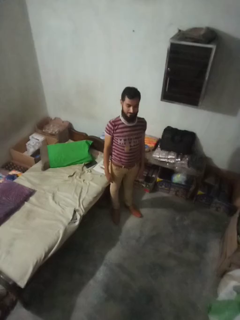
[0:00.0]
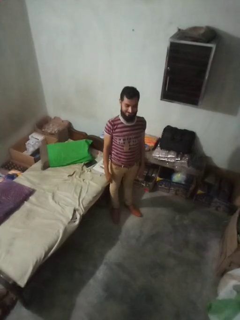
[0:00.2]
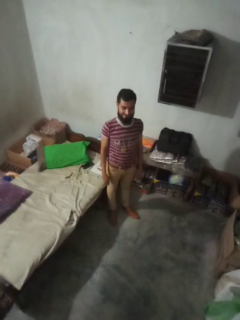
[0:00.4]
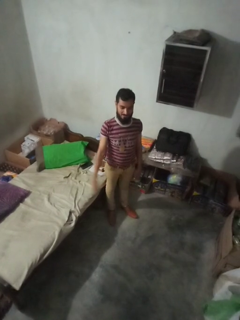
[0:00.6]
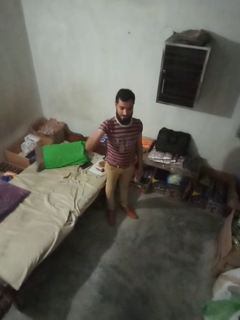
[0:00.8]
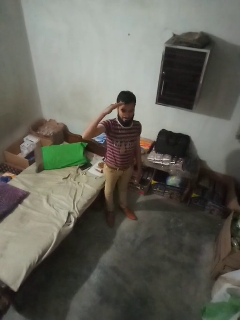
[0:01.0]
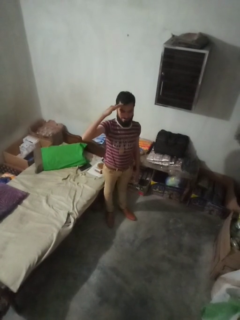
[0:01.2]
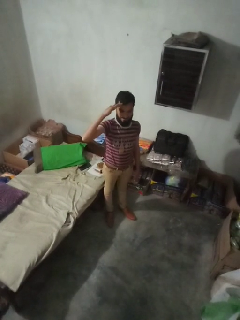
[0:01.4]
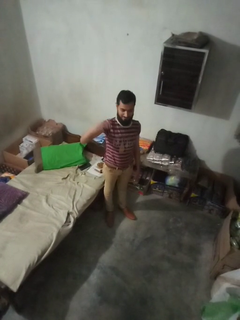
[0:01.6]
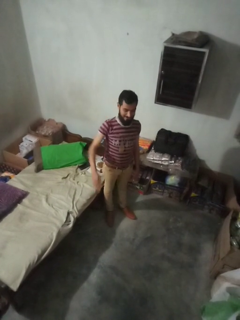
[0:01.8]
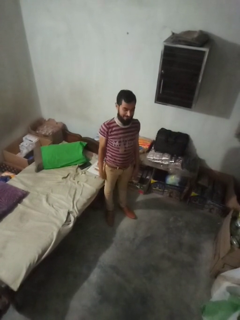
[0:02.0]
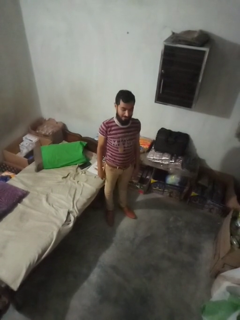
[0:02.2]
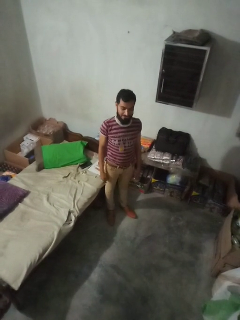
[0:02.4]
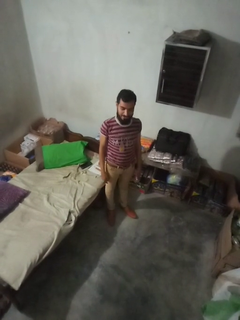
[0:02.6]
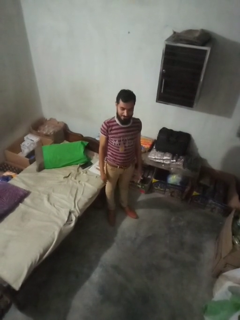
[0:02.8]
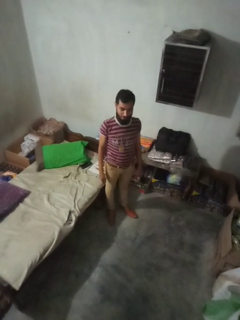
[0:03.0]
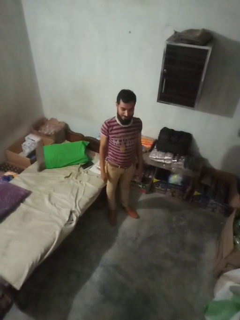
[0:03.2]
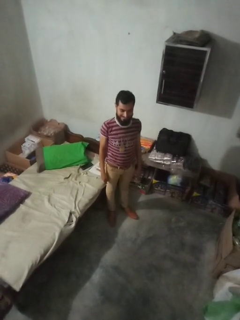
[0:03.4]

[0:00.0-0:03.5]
person salutes

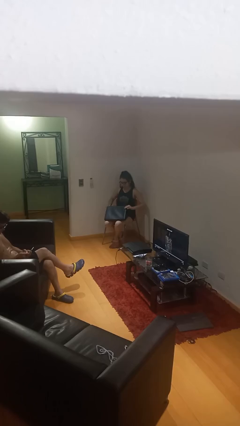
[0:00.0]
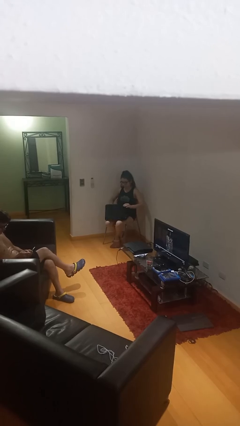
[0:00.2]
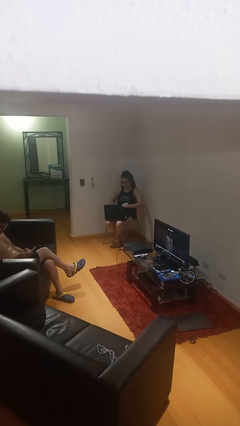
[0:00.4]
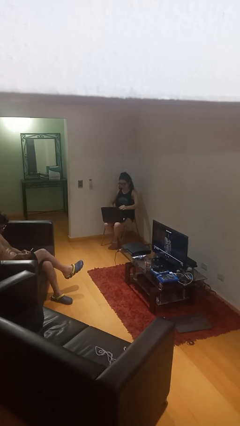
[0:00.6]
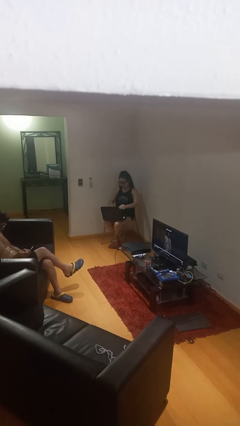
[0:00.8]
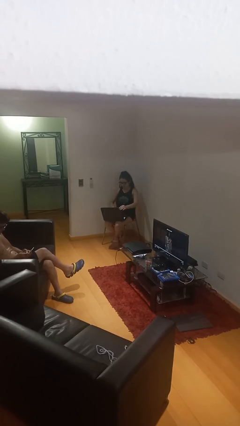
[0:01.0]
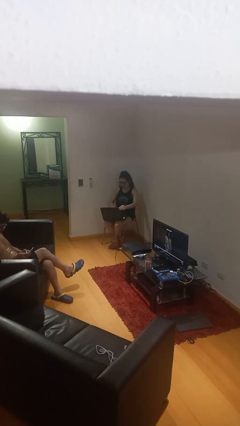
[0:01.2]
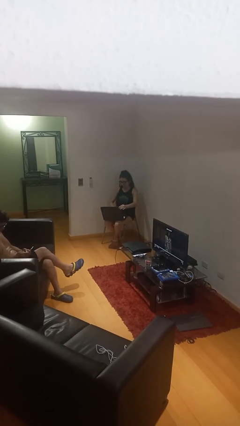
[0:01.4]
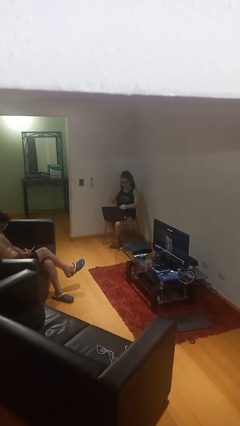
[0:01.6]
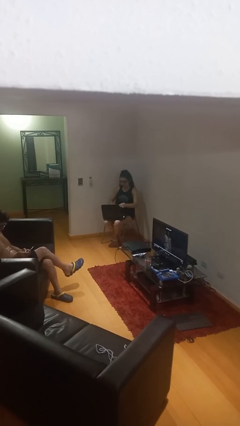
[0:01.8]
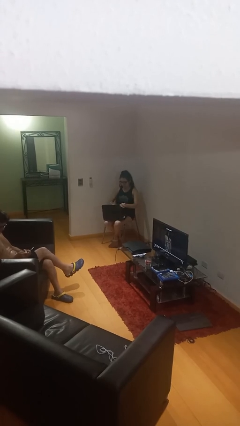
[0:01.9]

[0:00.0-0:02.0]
person interacts with laptop

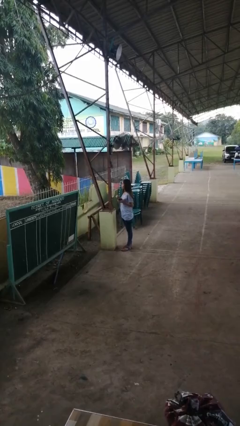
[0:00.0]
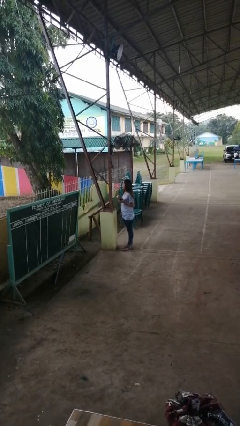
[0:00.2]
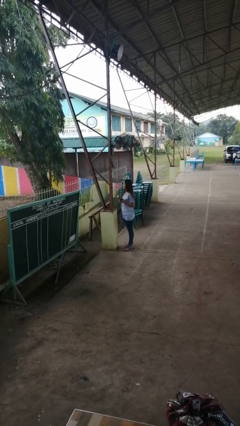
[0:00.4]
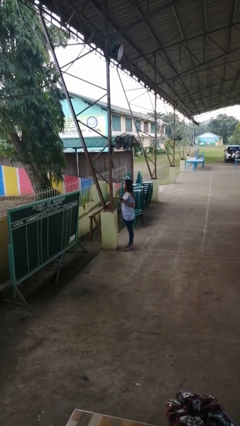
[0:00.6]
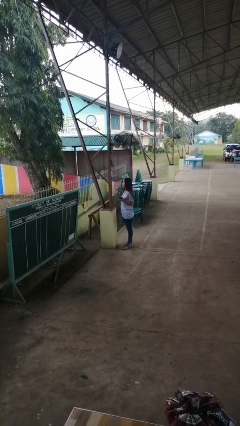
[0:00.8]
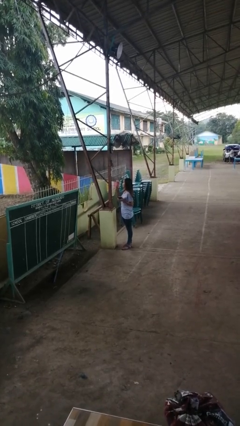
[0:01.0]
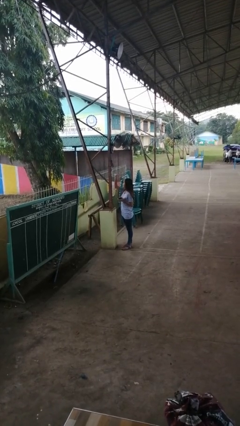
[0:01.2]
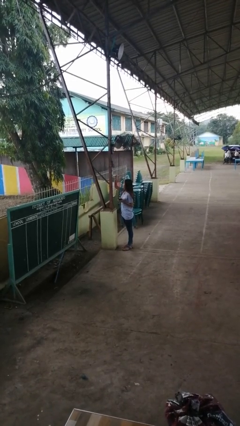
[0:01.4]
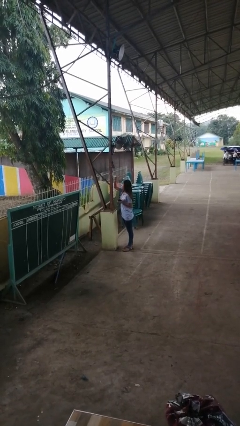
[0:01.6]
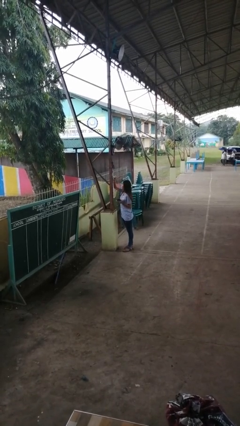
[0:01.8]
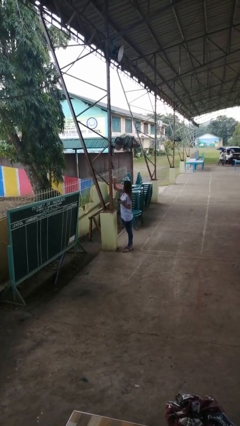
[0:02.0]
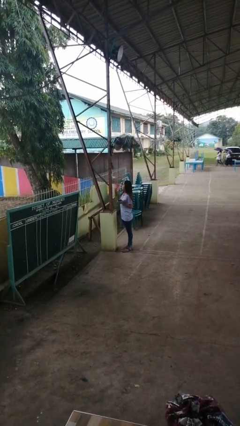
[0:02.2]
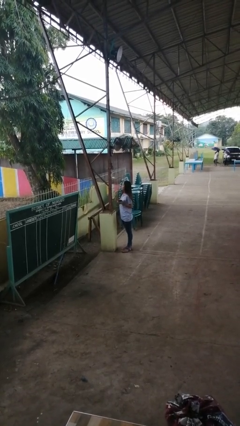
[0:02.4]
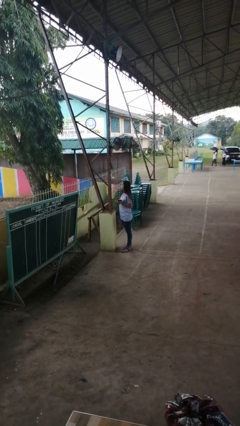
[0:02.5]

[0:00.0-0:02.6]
person plugs into electrical socket

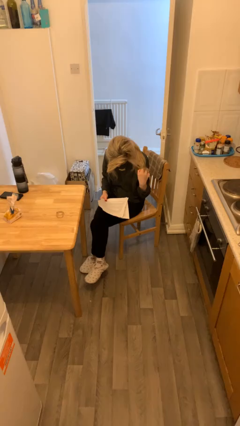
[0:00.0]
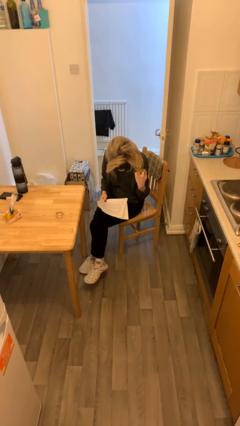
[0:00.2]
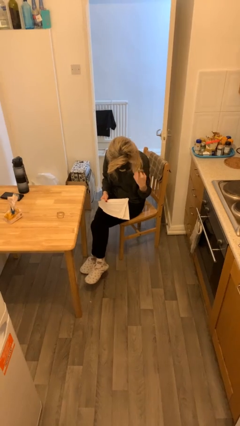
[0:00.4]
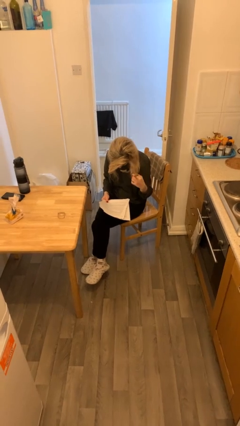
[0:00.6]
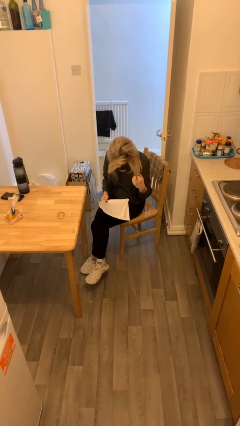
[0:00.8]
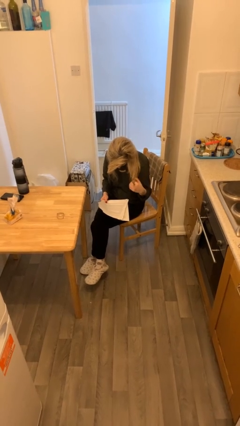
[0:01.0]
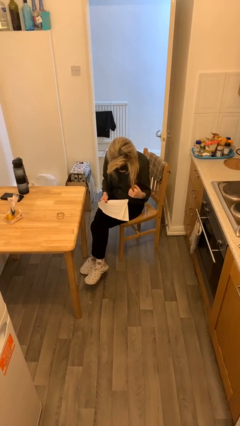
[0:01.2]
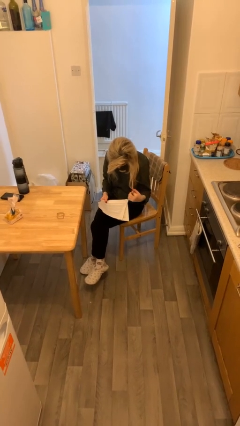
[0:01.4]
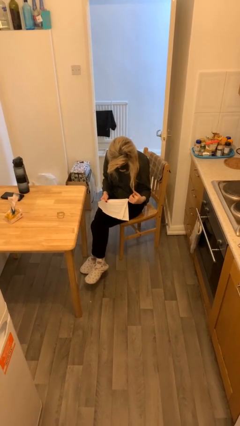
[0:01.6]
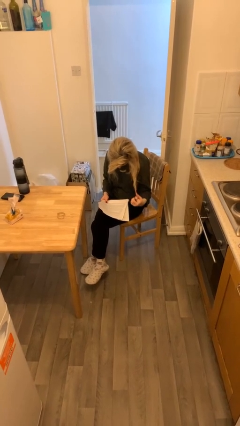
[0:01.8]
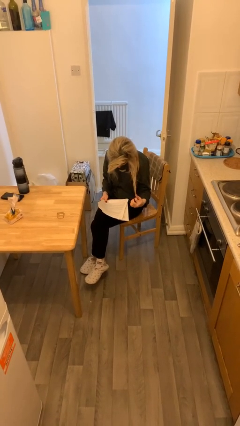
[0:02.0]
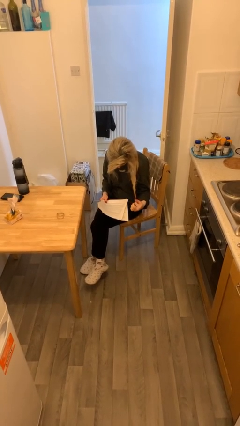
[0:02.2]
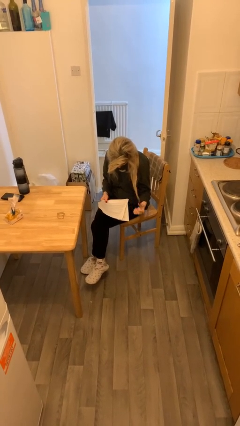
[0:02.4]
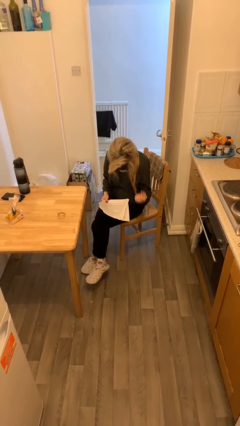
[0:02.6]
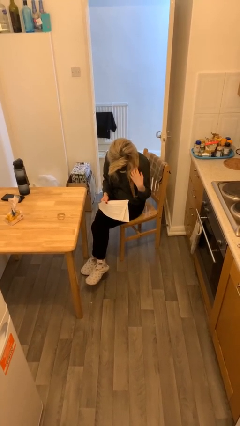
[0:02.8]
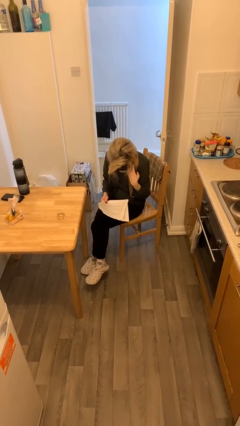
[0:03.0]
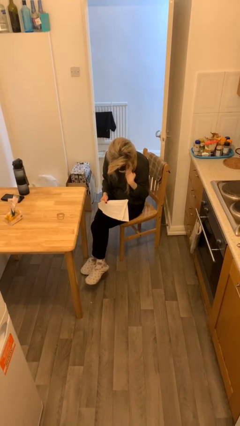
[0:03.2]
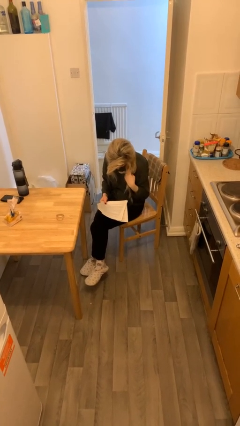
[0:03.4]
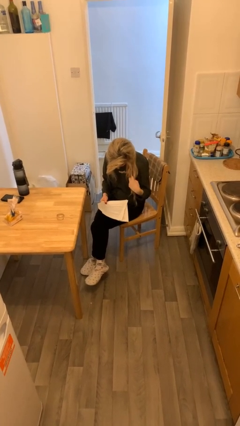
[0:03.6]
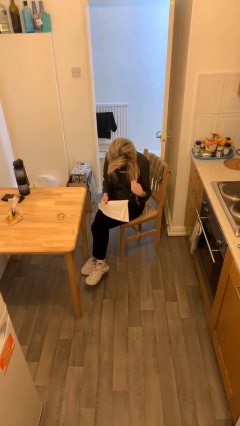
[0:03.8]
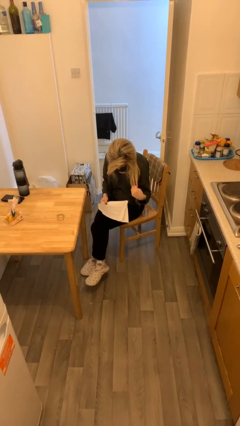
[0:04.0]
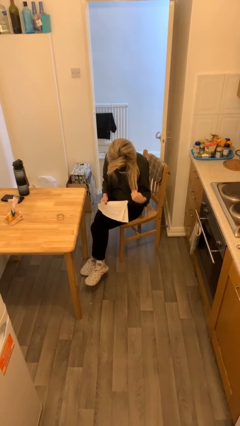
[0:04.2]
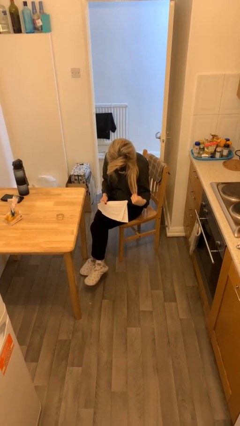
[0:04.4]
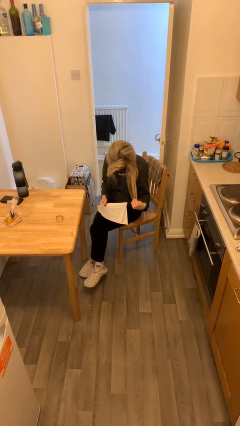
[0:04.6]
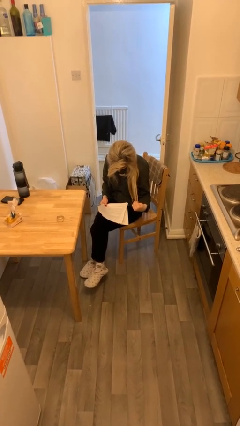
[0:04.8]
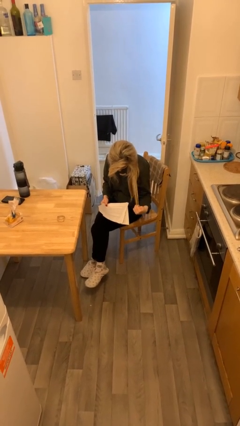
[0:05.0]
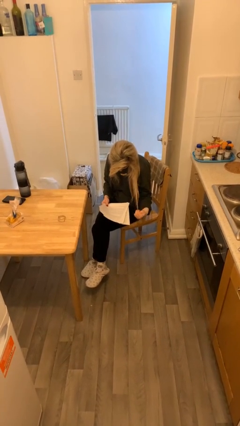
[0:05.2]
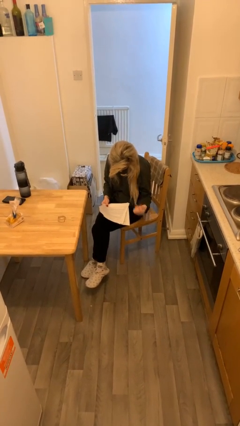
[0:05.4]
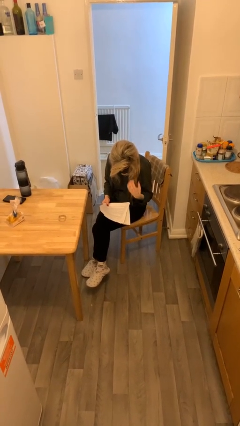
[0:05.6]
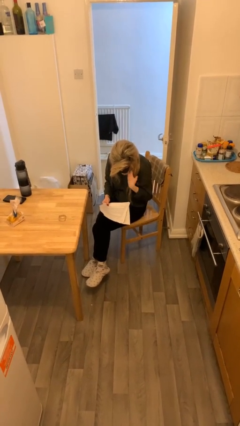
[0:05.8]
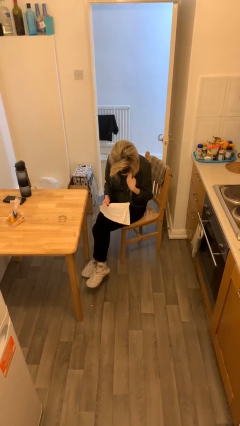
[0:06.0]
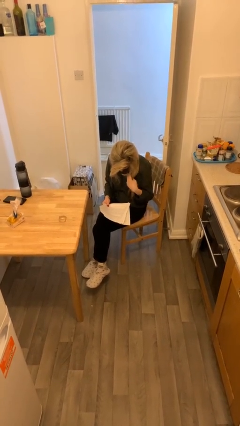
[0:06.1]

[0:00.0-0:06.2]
person reads document

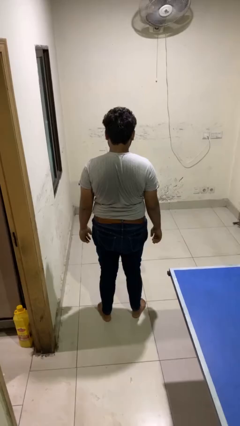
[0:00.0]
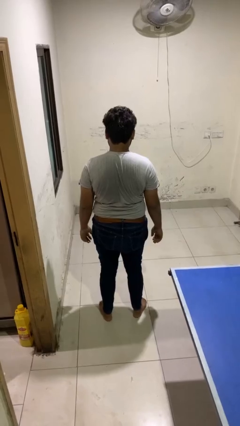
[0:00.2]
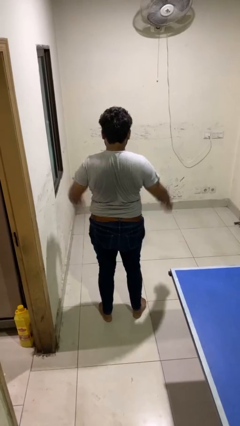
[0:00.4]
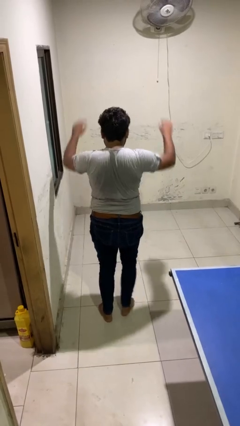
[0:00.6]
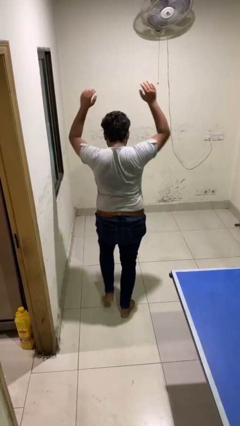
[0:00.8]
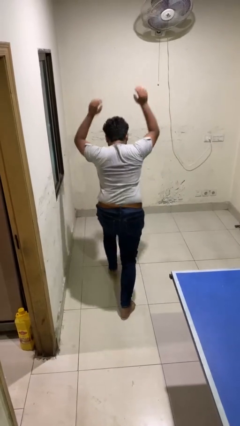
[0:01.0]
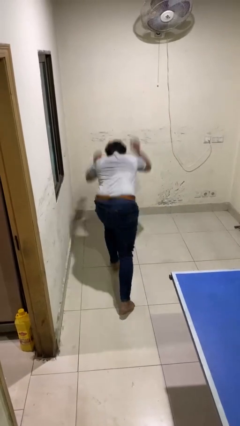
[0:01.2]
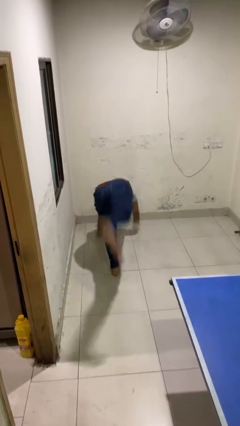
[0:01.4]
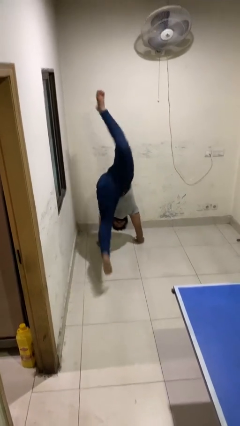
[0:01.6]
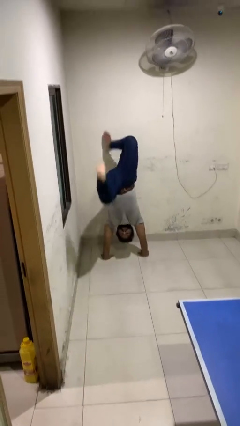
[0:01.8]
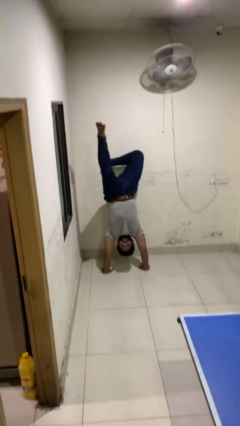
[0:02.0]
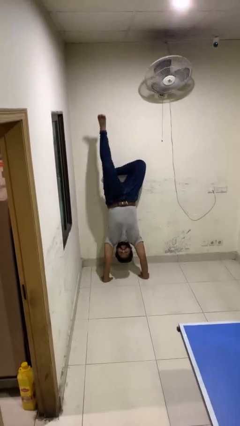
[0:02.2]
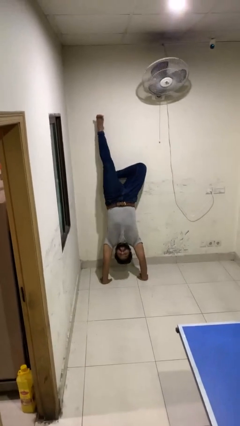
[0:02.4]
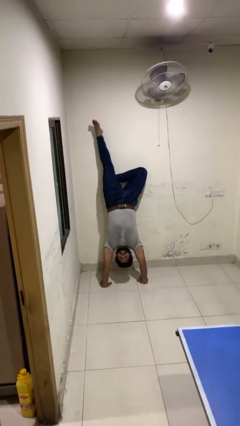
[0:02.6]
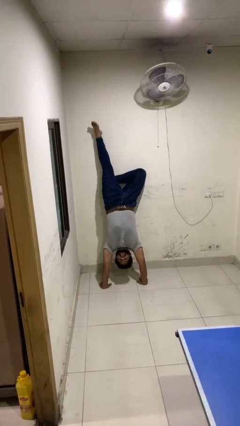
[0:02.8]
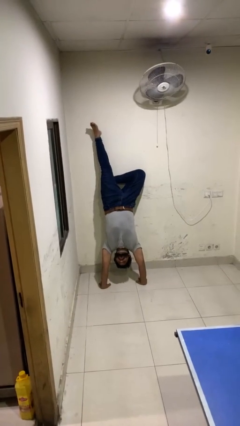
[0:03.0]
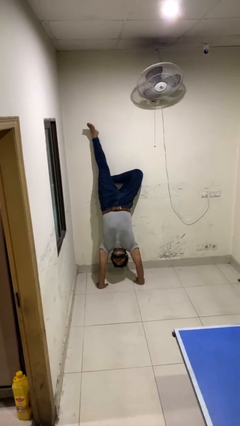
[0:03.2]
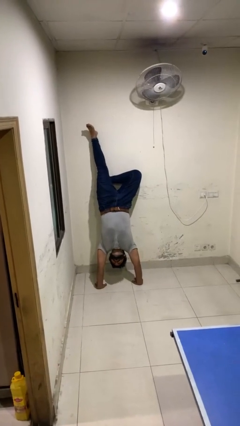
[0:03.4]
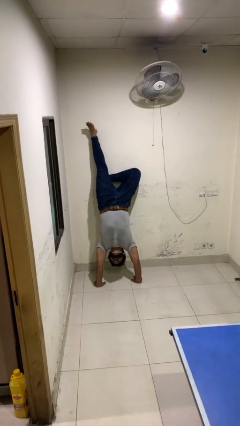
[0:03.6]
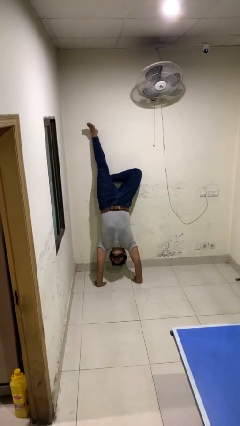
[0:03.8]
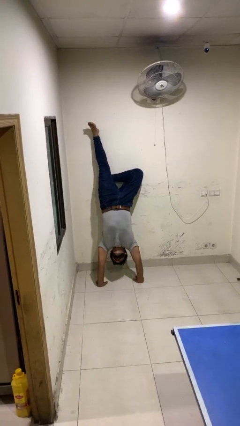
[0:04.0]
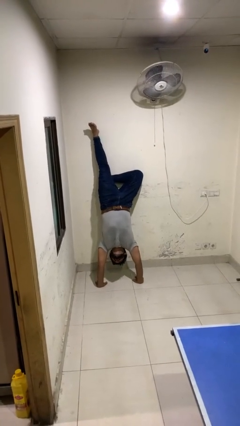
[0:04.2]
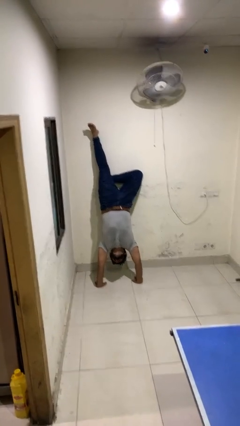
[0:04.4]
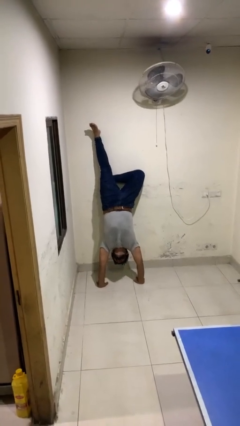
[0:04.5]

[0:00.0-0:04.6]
person handstand
